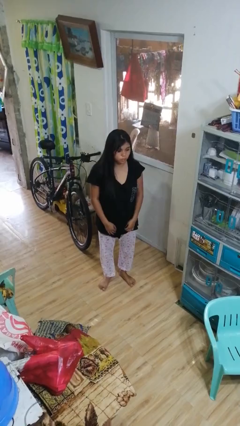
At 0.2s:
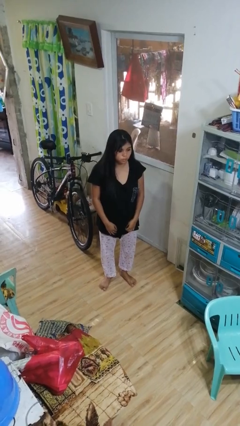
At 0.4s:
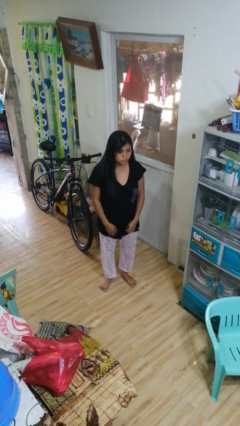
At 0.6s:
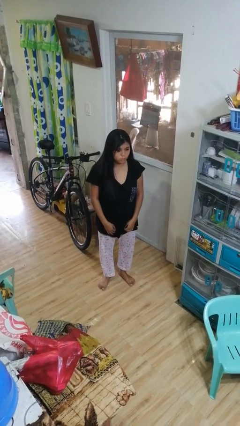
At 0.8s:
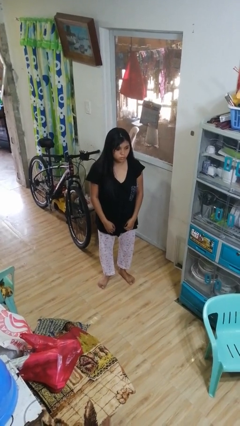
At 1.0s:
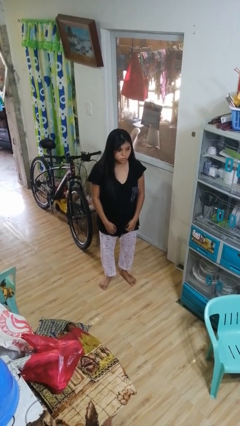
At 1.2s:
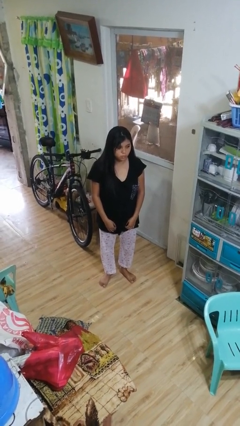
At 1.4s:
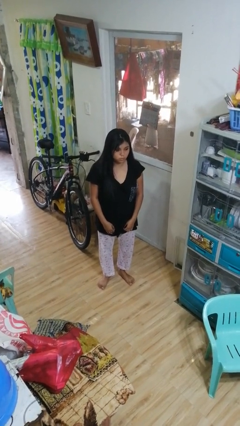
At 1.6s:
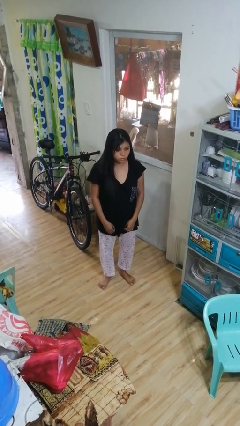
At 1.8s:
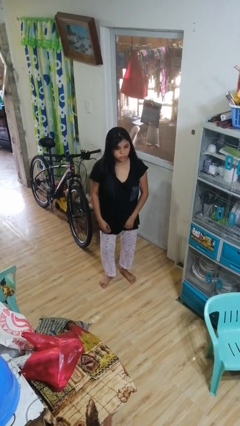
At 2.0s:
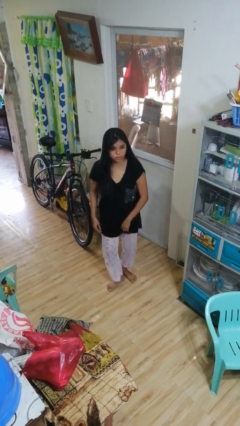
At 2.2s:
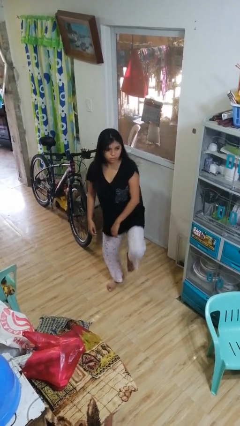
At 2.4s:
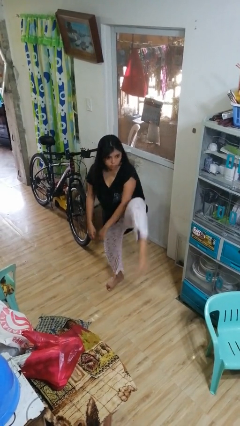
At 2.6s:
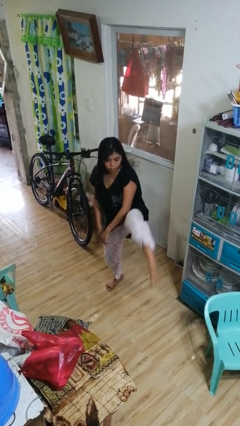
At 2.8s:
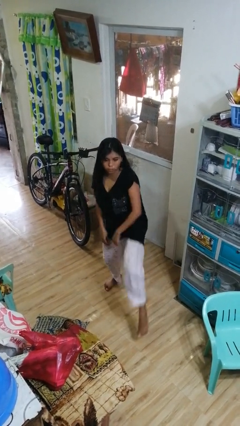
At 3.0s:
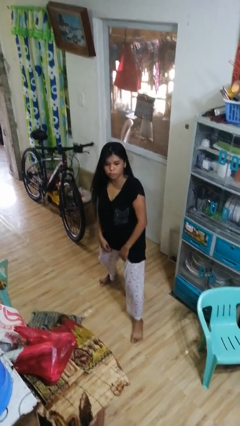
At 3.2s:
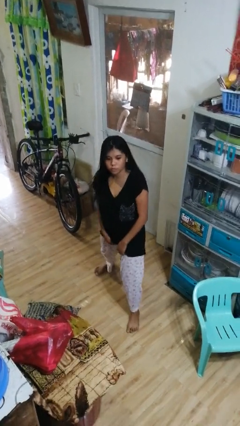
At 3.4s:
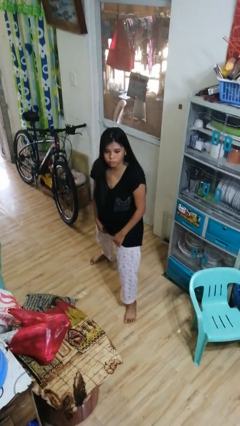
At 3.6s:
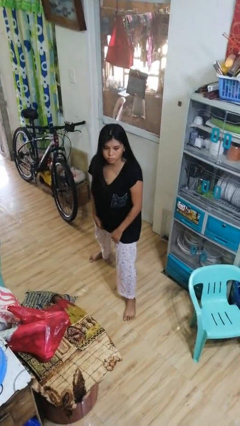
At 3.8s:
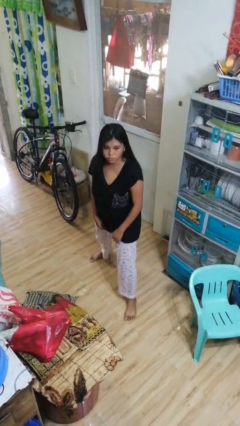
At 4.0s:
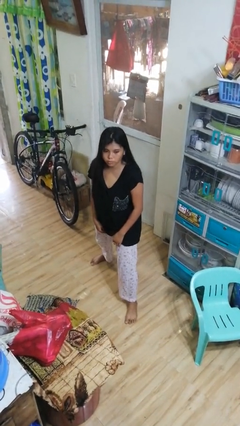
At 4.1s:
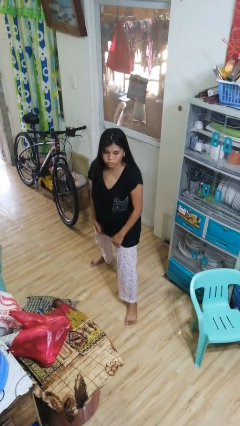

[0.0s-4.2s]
person karate kicks

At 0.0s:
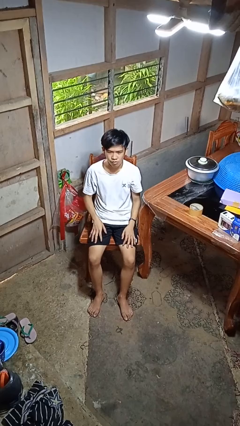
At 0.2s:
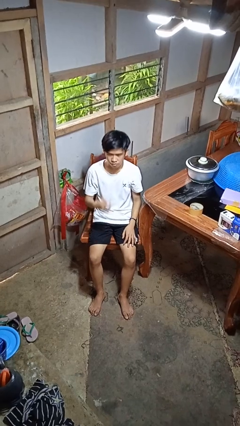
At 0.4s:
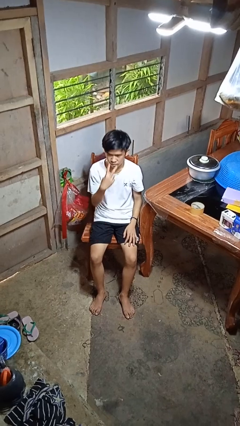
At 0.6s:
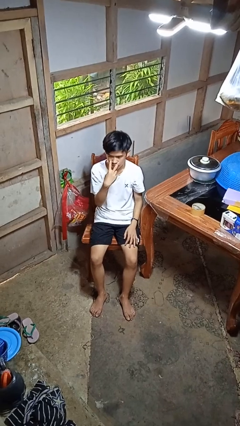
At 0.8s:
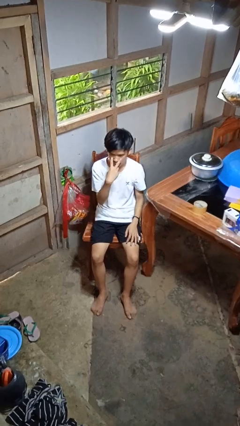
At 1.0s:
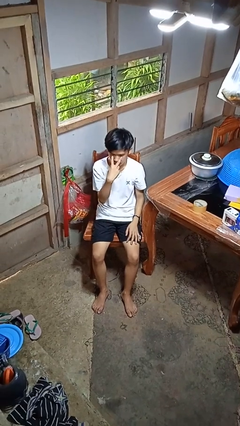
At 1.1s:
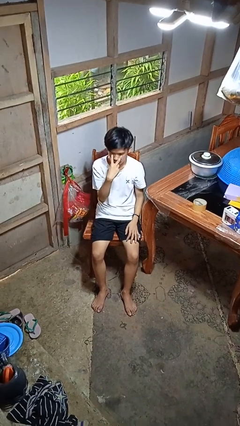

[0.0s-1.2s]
person gestures watch closely

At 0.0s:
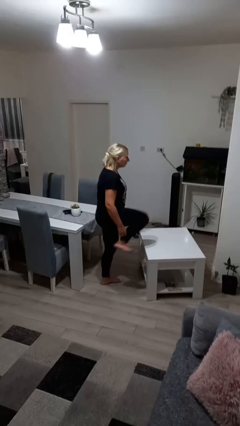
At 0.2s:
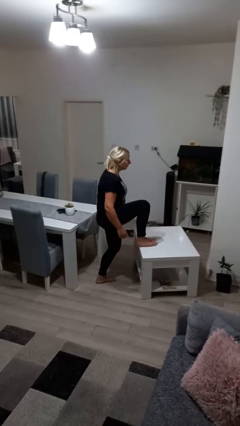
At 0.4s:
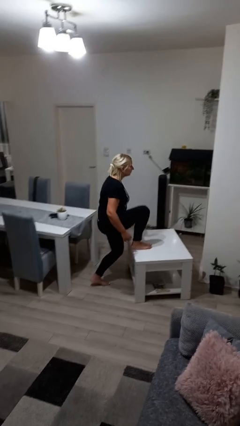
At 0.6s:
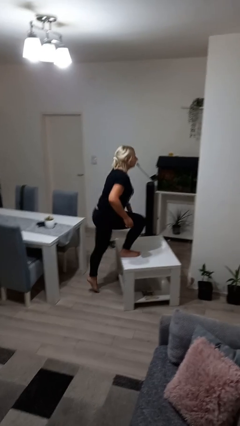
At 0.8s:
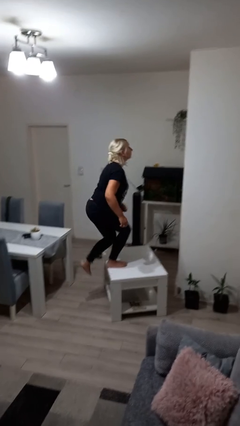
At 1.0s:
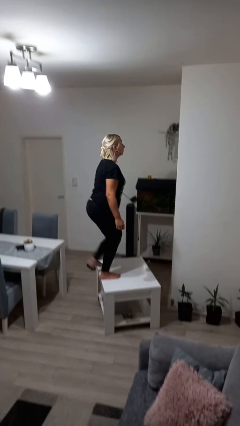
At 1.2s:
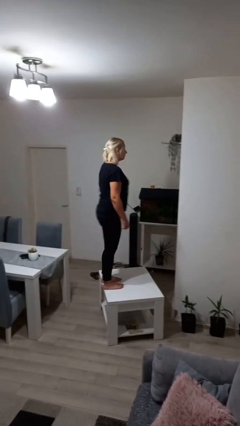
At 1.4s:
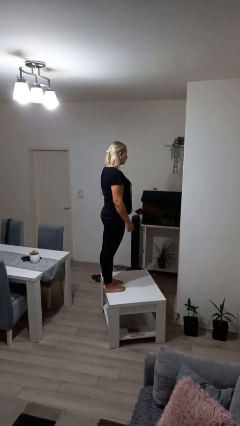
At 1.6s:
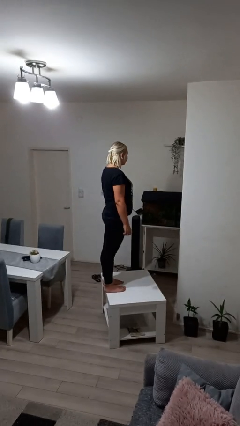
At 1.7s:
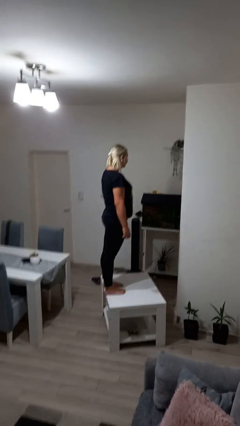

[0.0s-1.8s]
person climbs on table

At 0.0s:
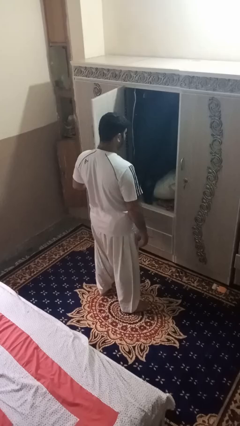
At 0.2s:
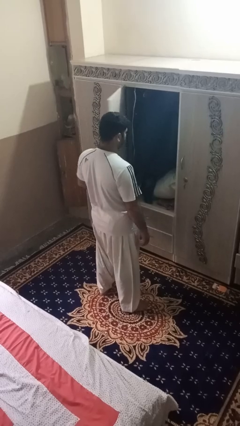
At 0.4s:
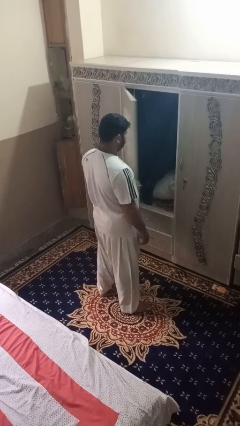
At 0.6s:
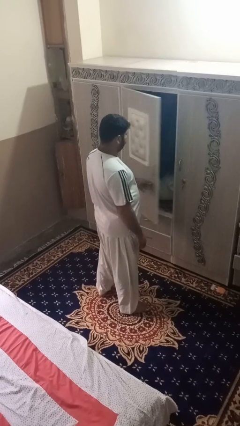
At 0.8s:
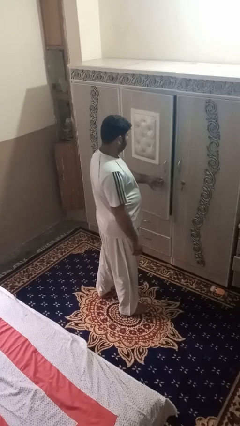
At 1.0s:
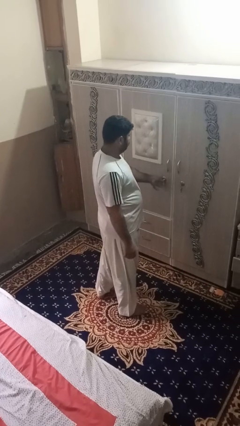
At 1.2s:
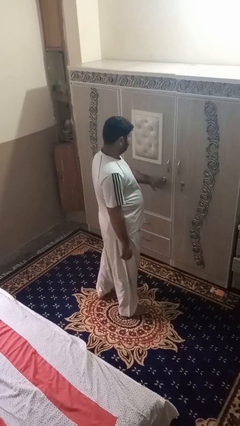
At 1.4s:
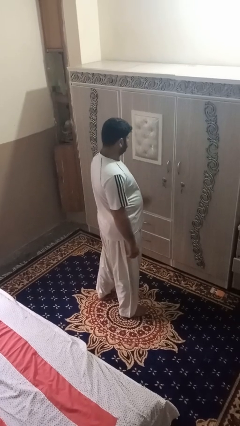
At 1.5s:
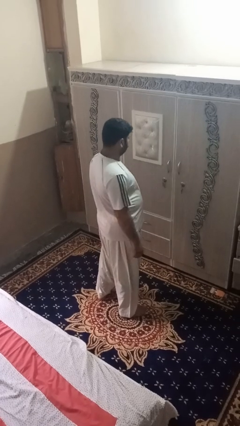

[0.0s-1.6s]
person closes dresser drawer

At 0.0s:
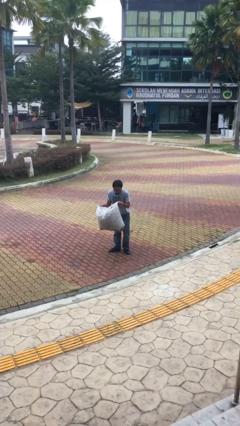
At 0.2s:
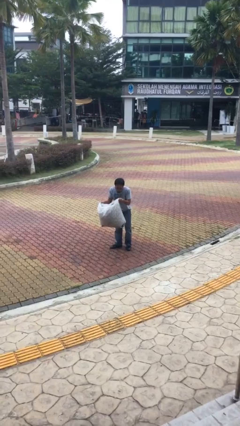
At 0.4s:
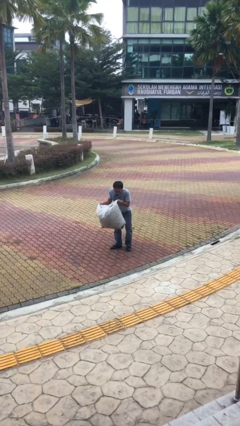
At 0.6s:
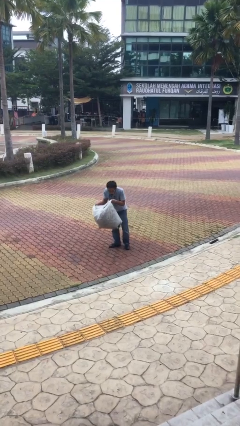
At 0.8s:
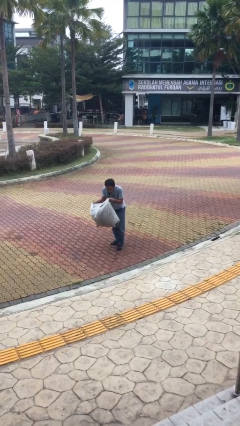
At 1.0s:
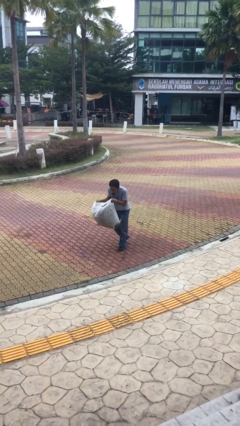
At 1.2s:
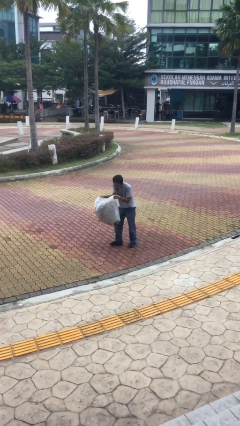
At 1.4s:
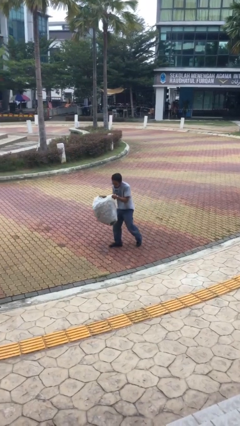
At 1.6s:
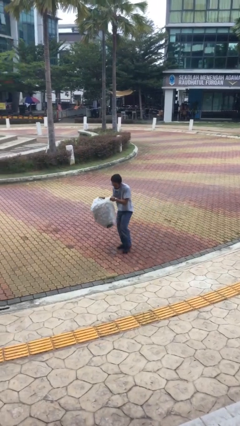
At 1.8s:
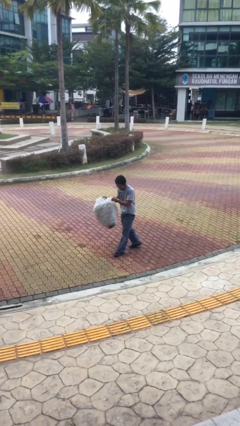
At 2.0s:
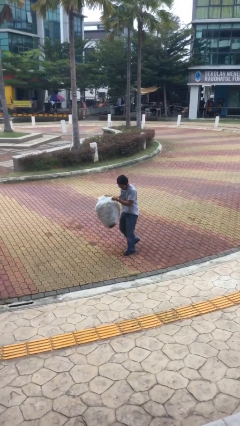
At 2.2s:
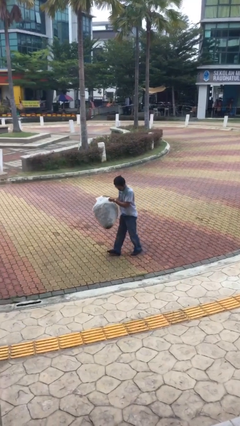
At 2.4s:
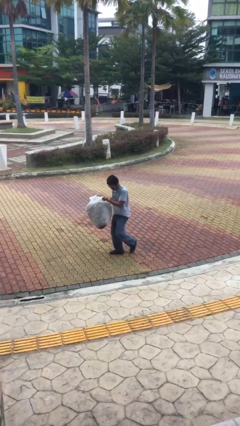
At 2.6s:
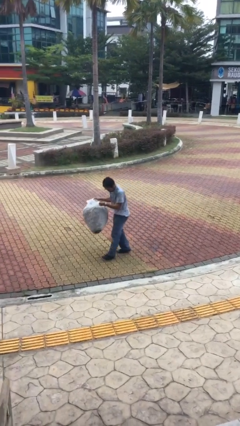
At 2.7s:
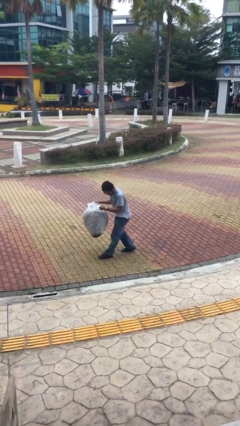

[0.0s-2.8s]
person carries heavy object

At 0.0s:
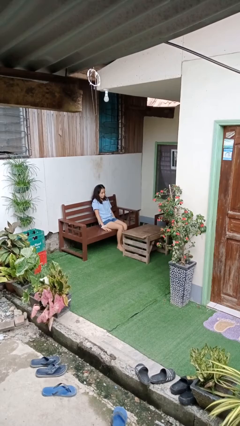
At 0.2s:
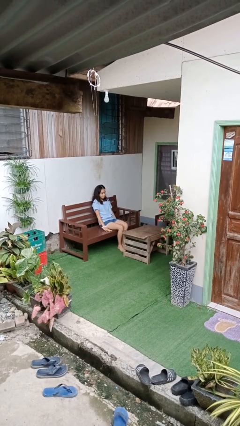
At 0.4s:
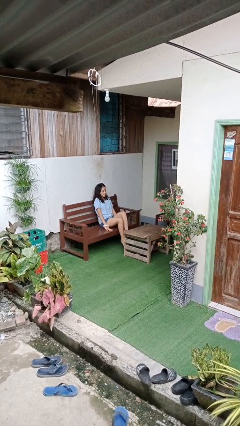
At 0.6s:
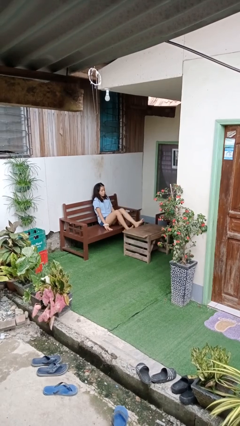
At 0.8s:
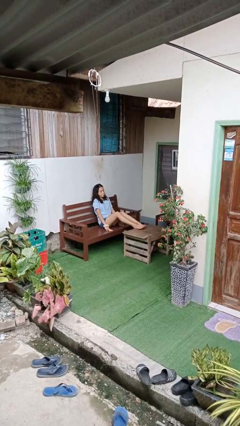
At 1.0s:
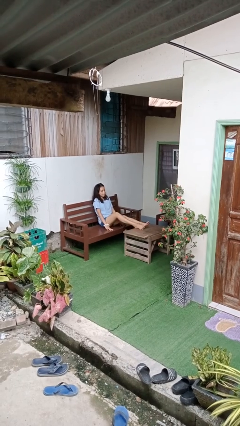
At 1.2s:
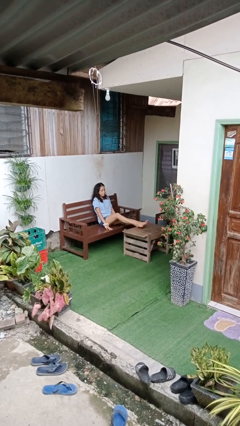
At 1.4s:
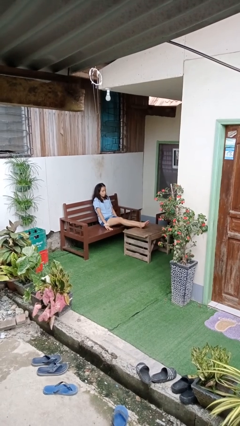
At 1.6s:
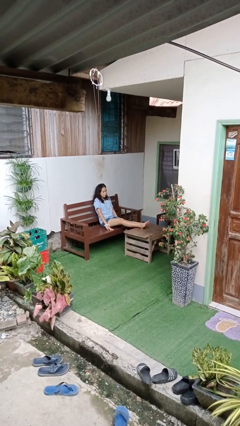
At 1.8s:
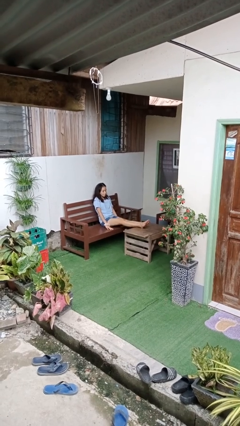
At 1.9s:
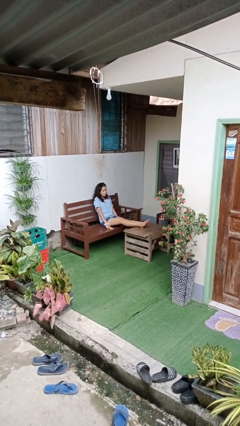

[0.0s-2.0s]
person puts feet up

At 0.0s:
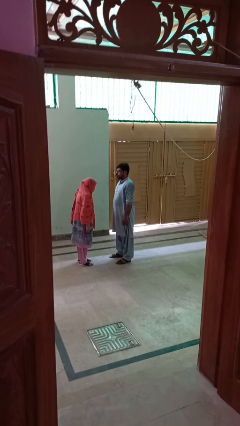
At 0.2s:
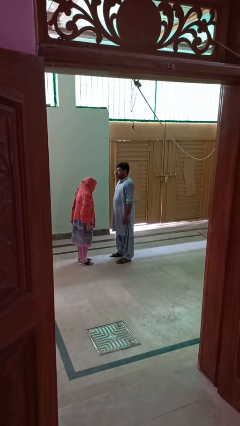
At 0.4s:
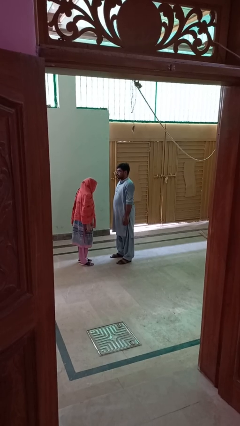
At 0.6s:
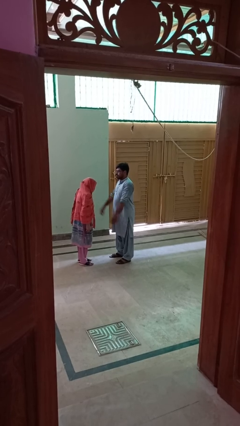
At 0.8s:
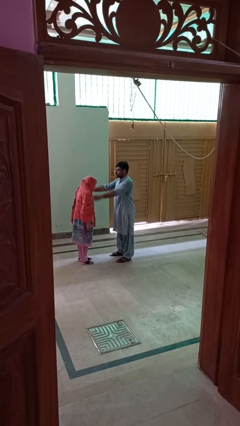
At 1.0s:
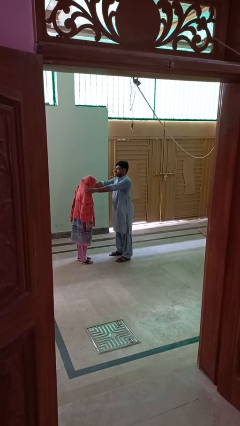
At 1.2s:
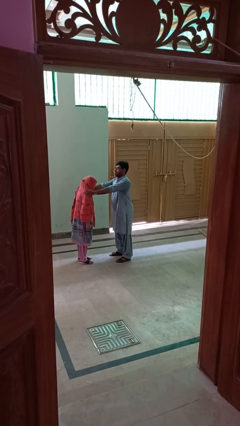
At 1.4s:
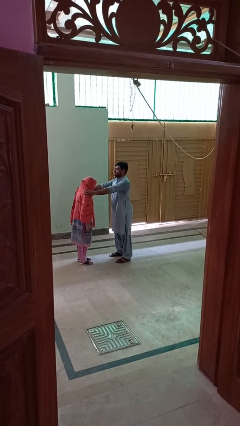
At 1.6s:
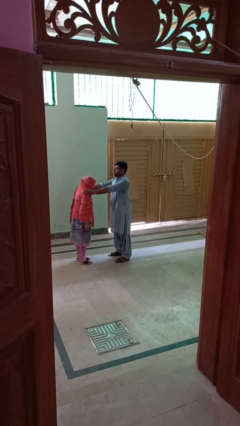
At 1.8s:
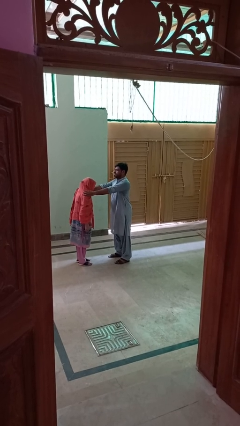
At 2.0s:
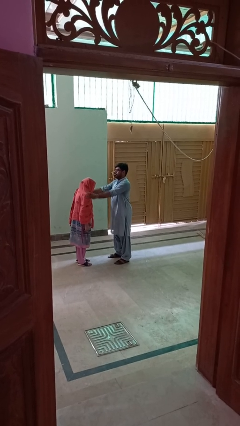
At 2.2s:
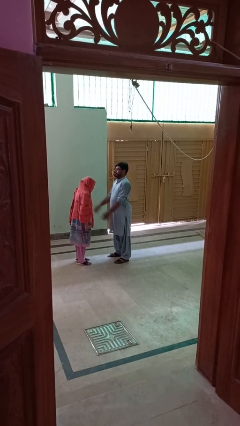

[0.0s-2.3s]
person pounds shoulders of person

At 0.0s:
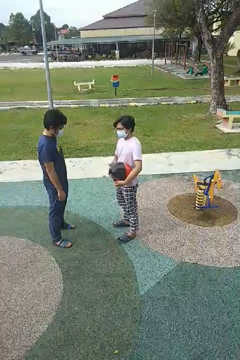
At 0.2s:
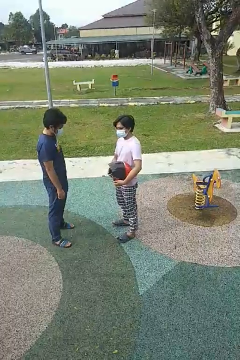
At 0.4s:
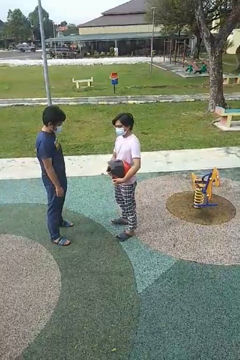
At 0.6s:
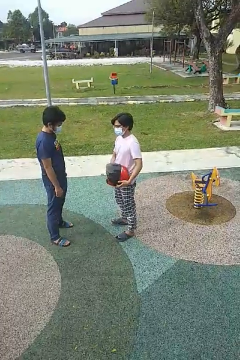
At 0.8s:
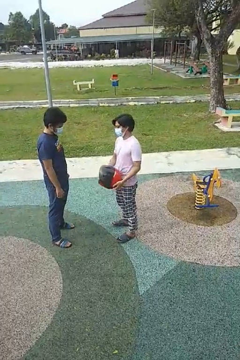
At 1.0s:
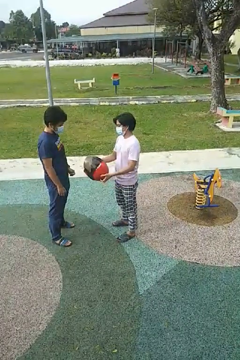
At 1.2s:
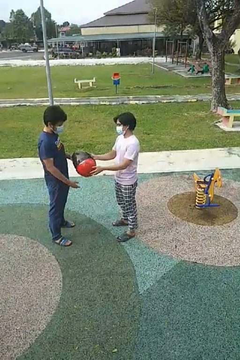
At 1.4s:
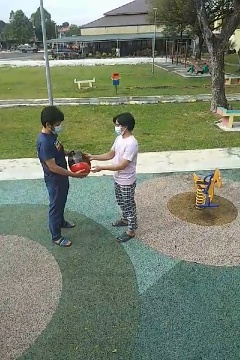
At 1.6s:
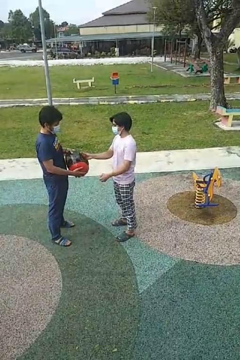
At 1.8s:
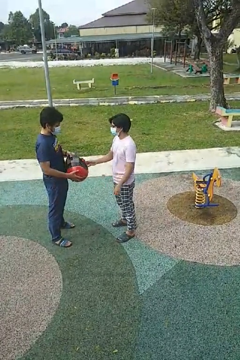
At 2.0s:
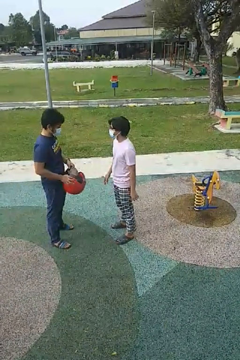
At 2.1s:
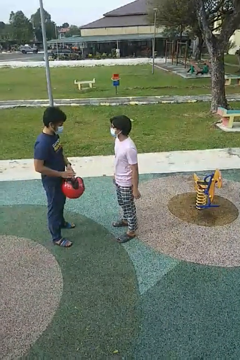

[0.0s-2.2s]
person transfers object to person
